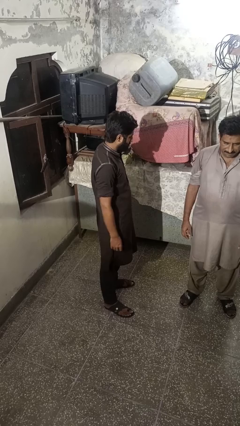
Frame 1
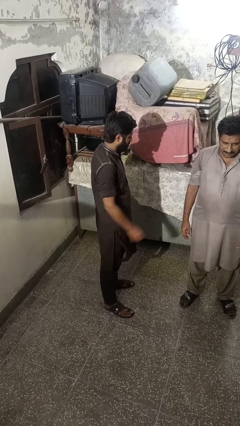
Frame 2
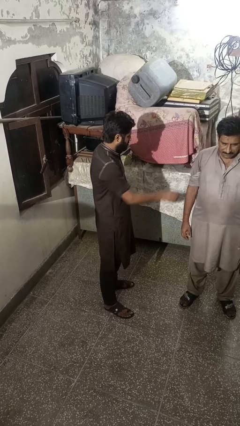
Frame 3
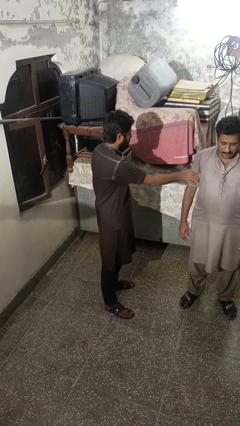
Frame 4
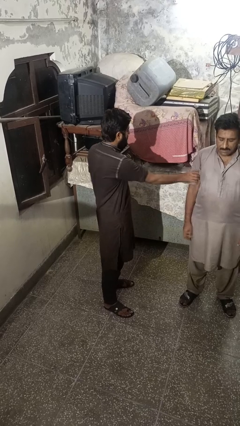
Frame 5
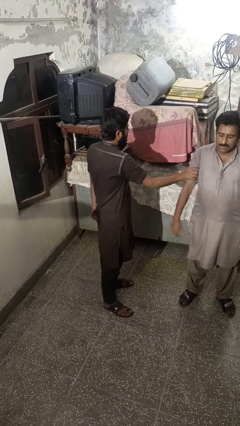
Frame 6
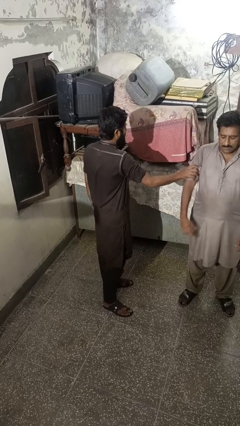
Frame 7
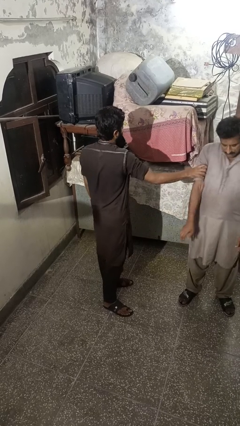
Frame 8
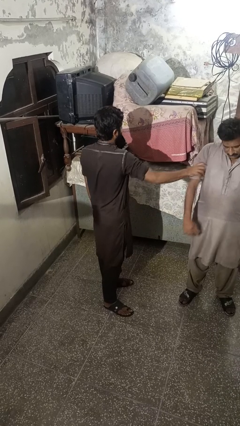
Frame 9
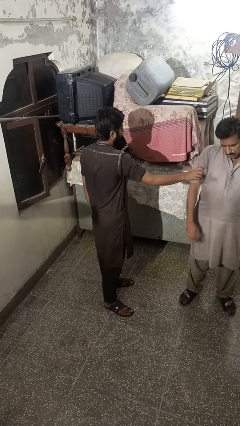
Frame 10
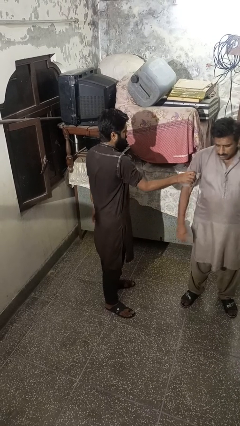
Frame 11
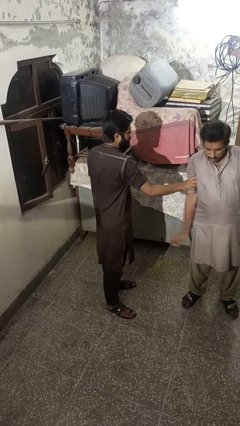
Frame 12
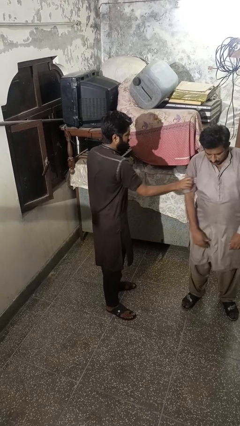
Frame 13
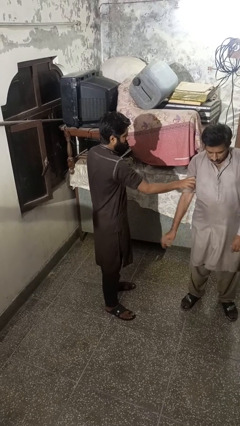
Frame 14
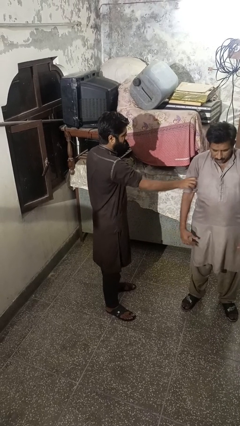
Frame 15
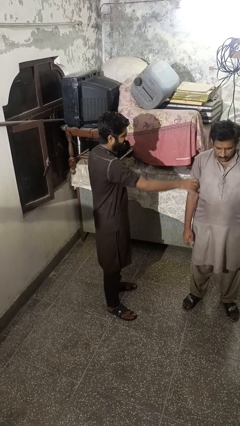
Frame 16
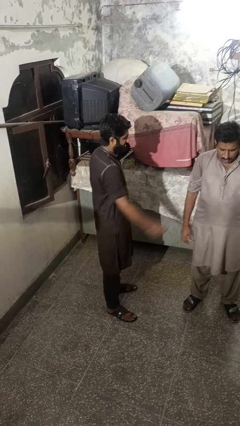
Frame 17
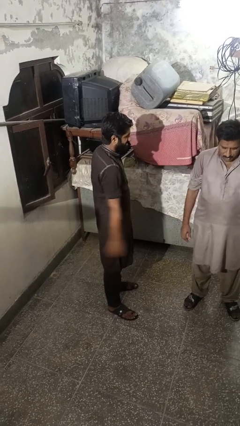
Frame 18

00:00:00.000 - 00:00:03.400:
person grabs person by bicep

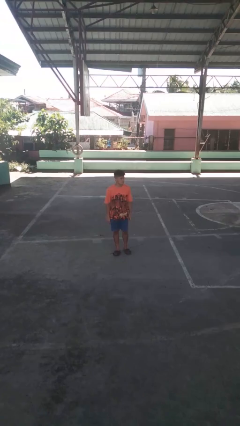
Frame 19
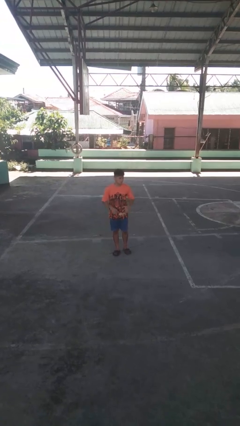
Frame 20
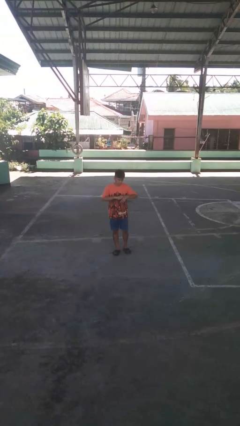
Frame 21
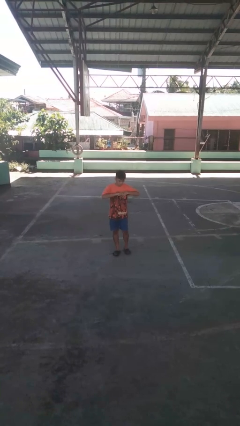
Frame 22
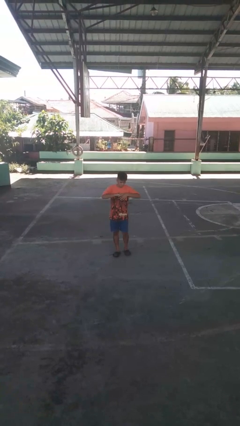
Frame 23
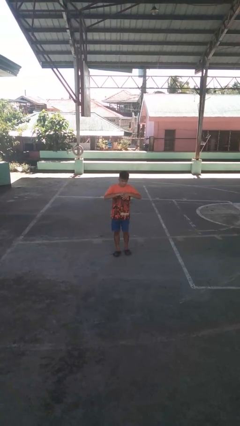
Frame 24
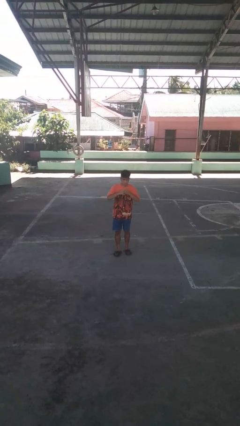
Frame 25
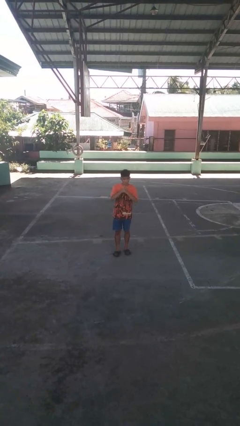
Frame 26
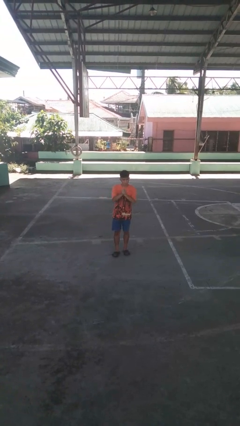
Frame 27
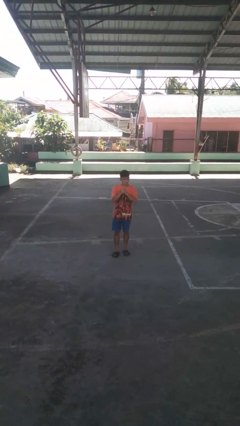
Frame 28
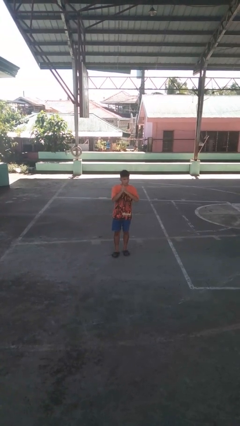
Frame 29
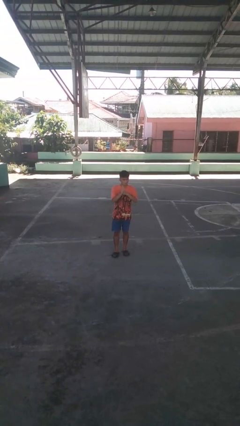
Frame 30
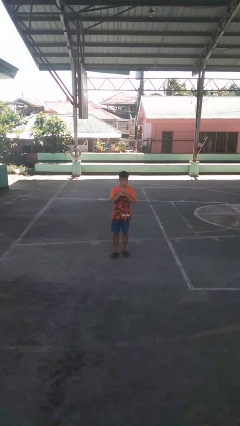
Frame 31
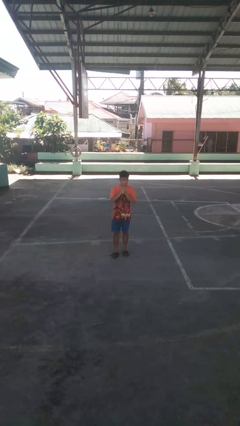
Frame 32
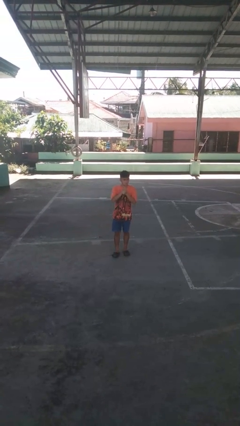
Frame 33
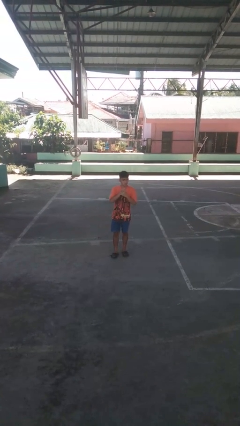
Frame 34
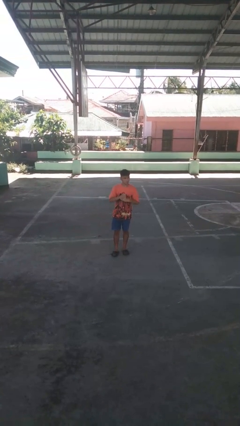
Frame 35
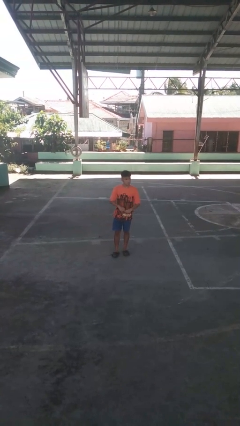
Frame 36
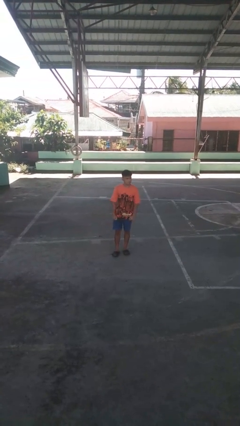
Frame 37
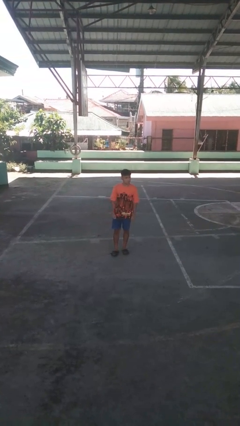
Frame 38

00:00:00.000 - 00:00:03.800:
person cracks knuckles

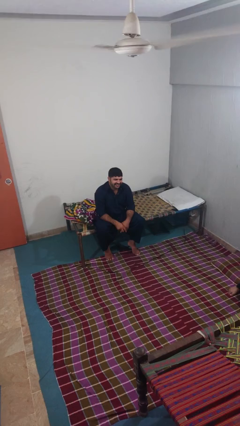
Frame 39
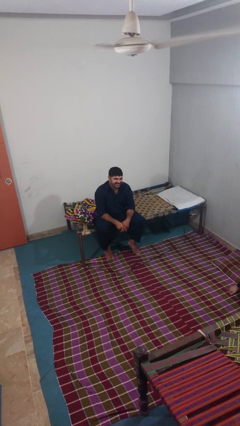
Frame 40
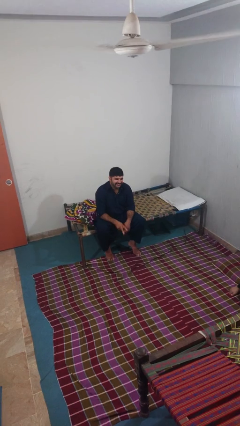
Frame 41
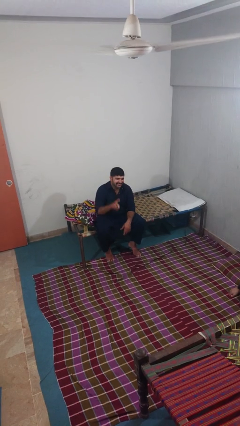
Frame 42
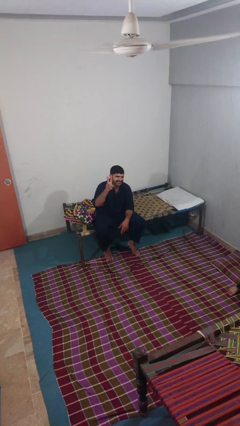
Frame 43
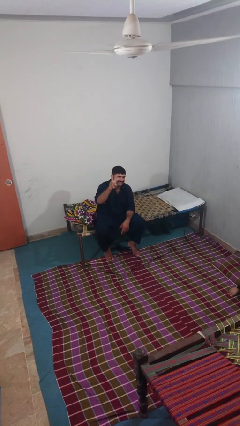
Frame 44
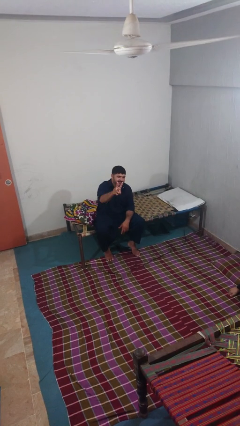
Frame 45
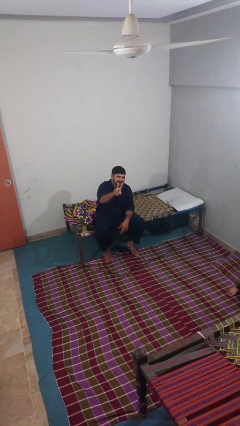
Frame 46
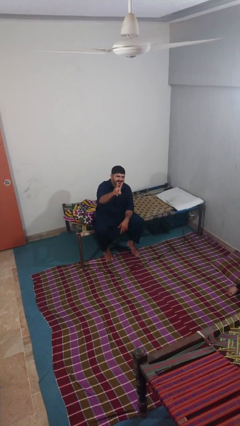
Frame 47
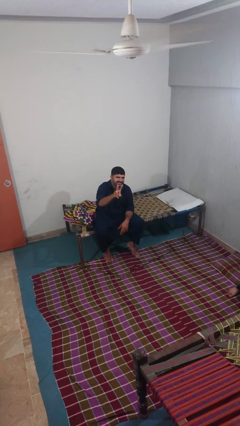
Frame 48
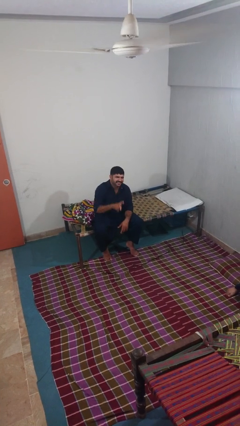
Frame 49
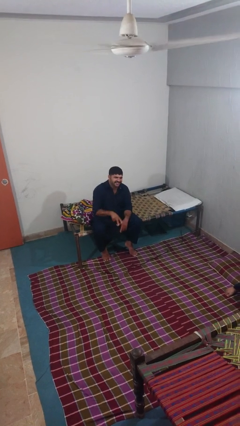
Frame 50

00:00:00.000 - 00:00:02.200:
person gestures peace

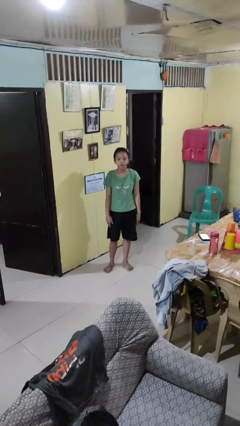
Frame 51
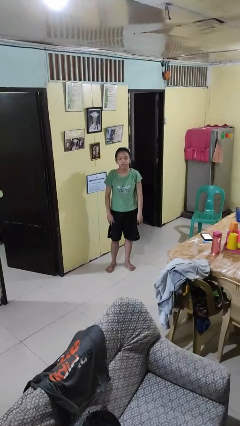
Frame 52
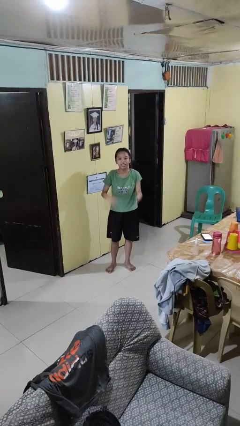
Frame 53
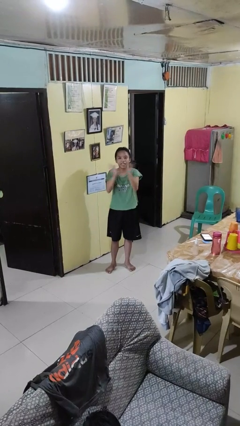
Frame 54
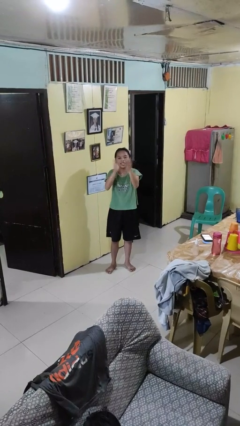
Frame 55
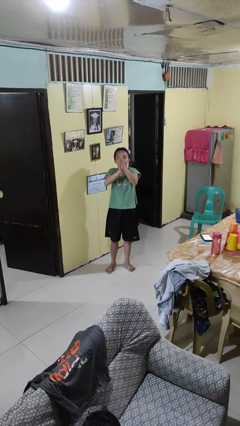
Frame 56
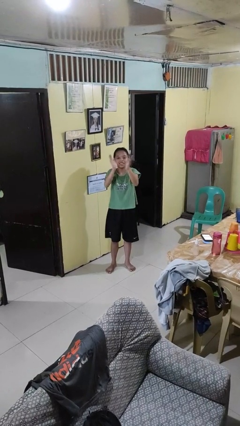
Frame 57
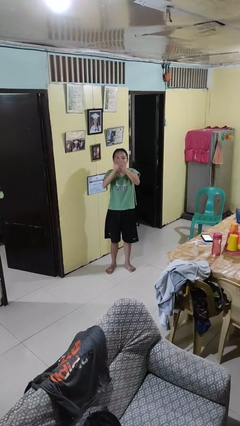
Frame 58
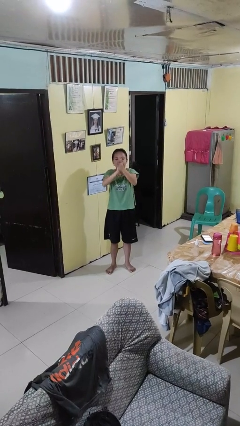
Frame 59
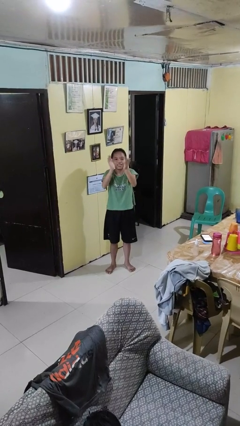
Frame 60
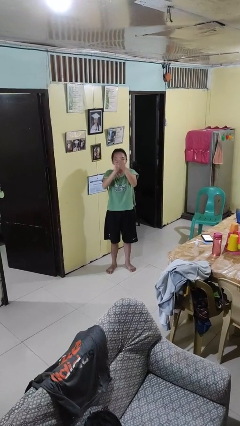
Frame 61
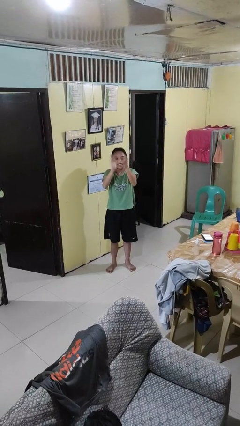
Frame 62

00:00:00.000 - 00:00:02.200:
person claps hands

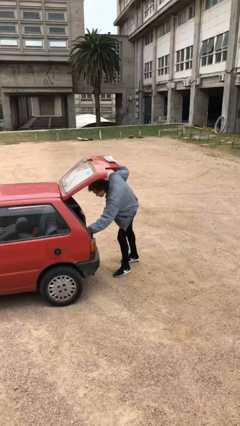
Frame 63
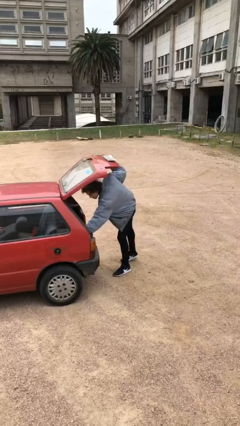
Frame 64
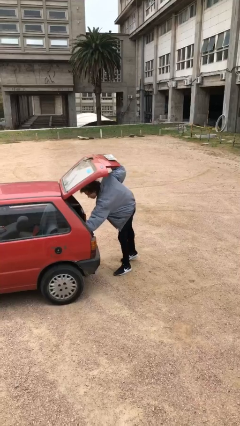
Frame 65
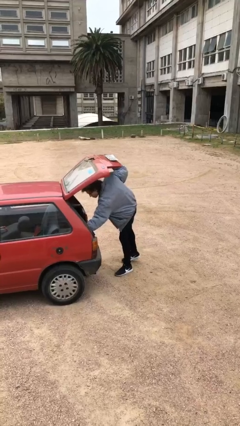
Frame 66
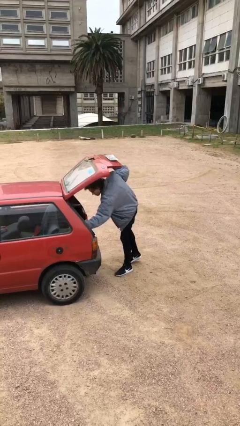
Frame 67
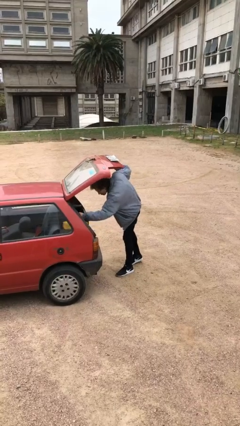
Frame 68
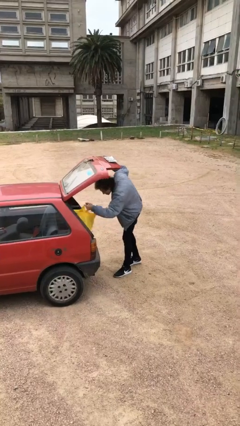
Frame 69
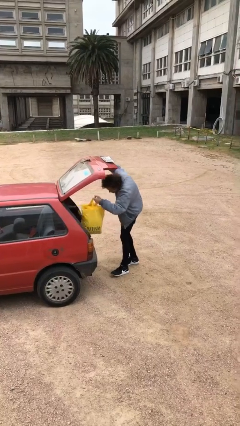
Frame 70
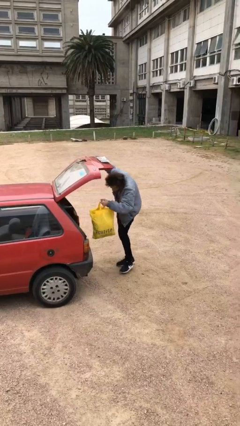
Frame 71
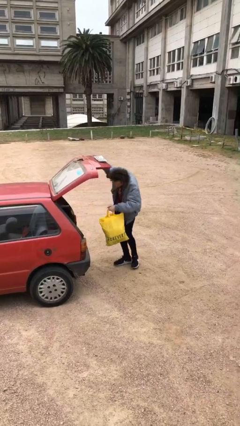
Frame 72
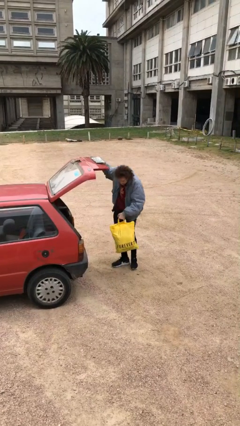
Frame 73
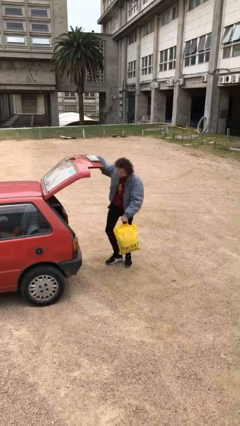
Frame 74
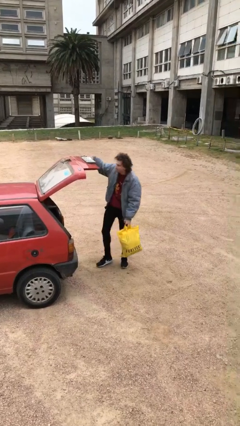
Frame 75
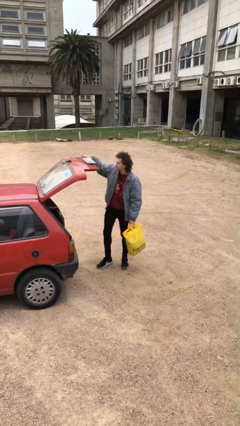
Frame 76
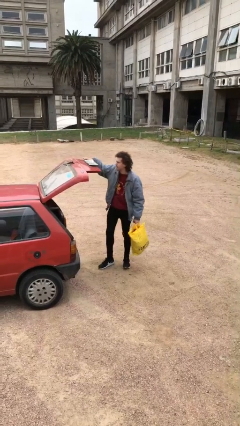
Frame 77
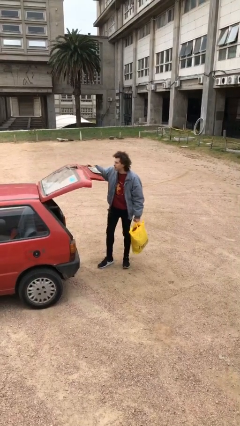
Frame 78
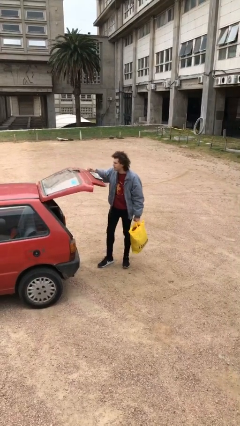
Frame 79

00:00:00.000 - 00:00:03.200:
person unloads car

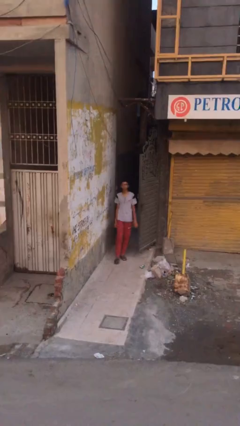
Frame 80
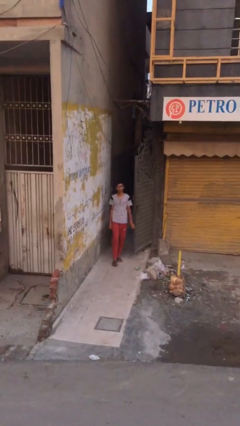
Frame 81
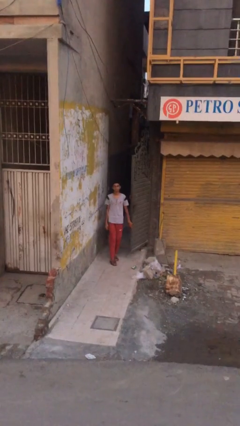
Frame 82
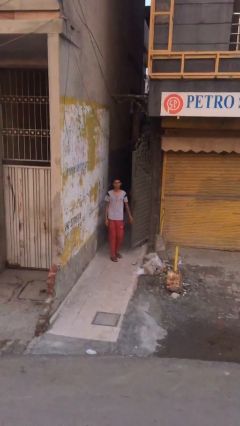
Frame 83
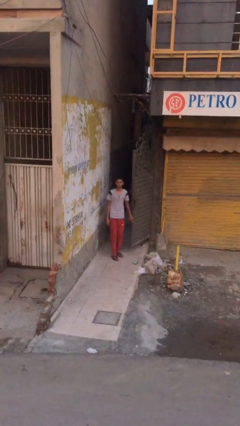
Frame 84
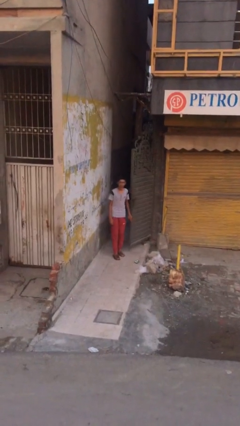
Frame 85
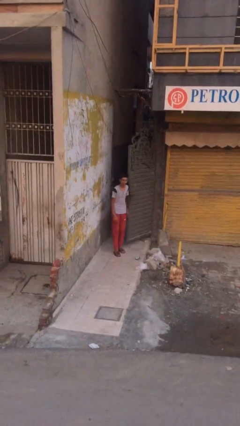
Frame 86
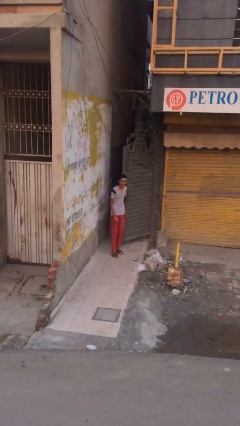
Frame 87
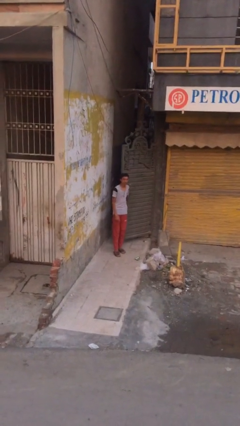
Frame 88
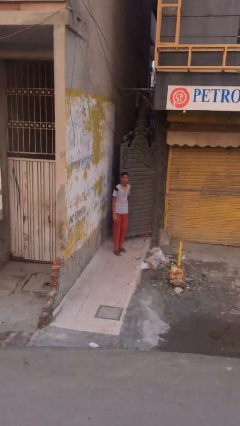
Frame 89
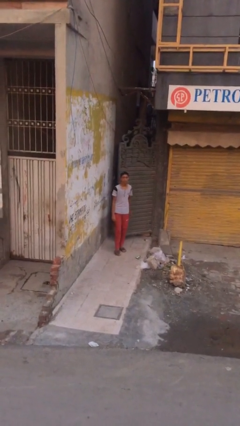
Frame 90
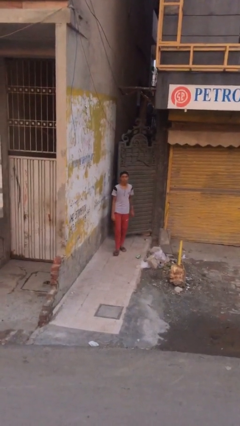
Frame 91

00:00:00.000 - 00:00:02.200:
person closes facility door

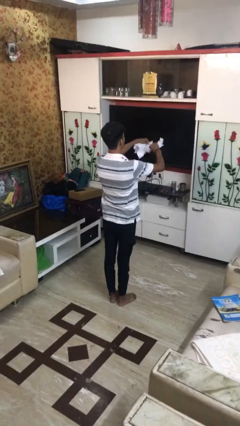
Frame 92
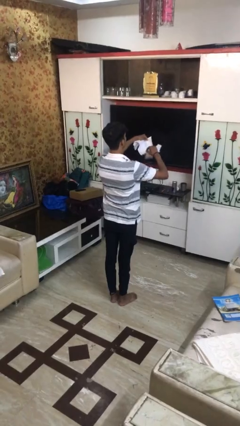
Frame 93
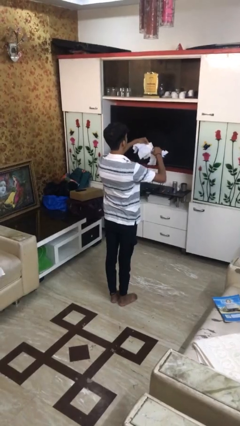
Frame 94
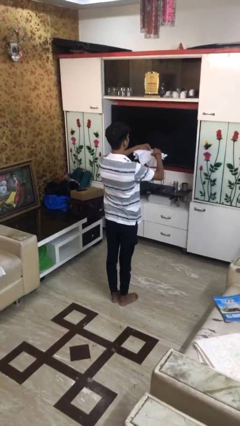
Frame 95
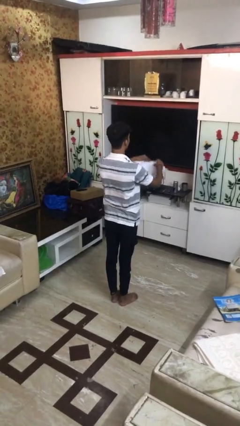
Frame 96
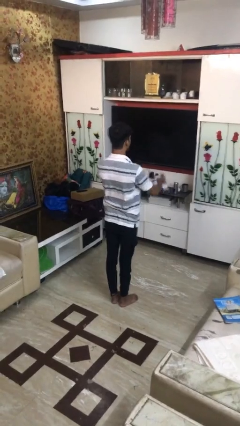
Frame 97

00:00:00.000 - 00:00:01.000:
person tears paper
